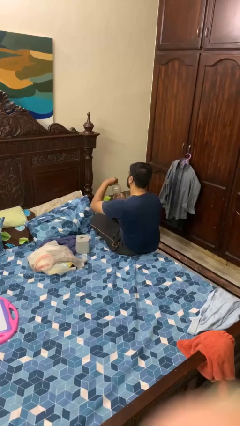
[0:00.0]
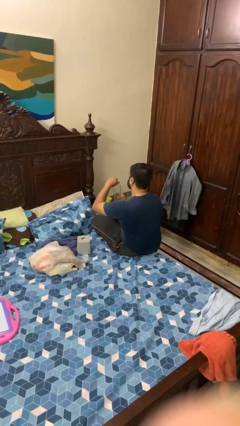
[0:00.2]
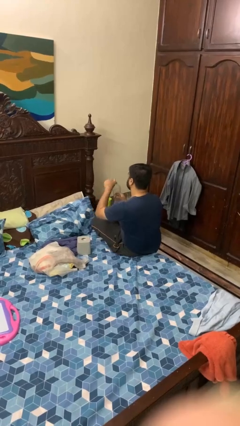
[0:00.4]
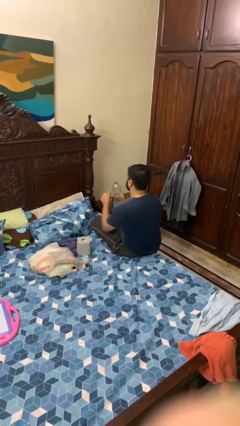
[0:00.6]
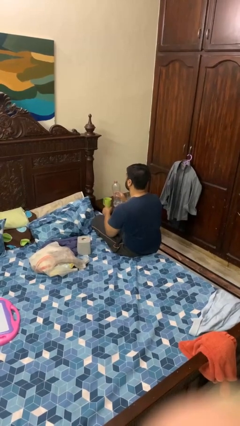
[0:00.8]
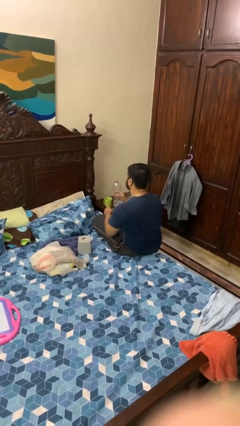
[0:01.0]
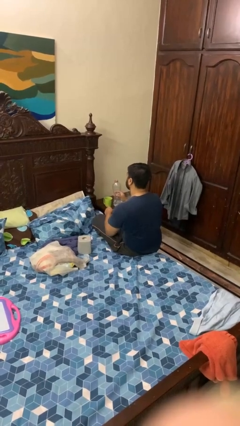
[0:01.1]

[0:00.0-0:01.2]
person unscrews lid from bottle

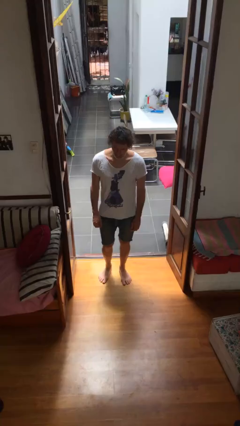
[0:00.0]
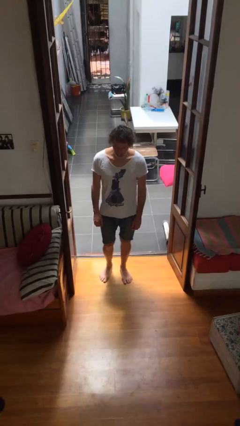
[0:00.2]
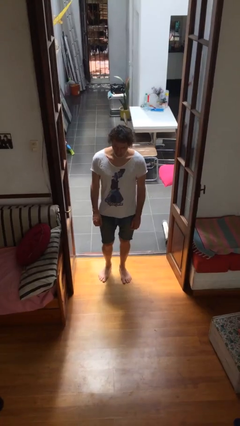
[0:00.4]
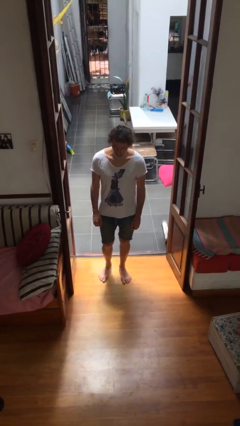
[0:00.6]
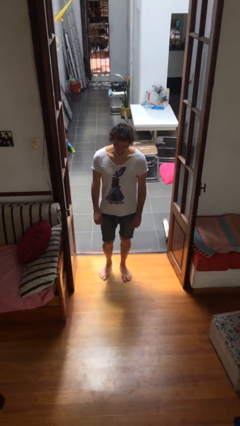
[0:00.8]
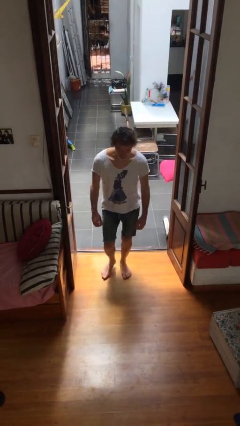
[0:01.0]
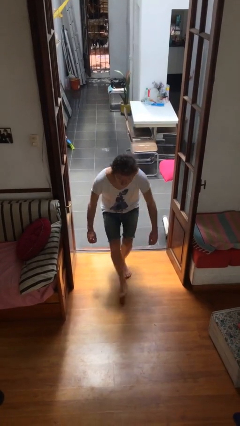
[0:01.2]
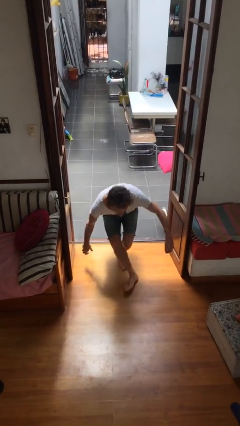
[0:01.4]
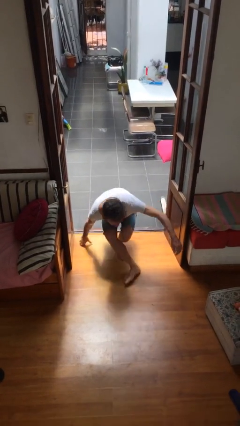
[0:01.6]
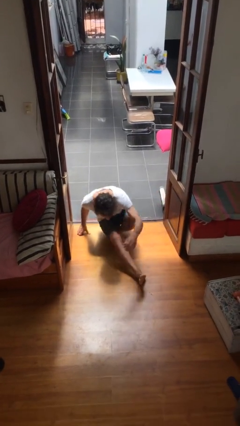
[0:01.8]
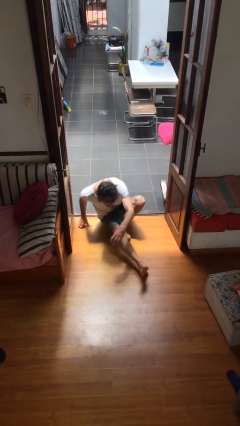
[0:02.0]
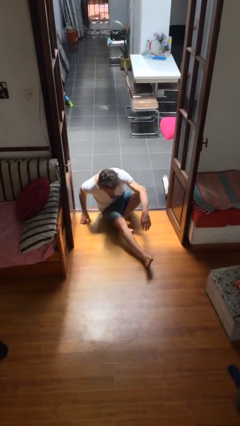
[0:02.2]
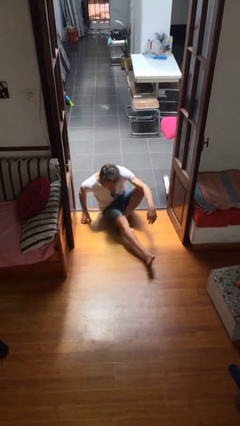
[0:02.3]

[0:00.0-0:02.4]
person sits down

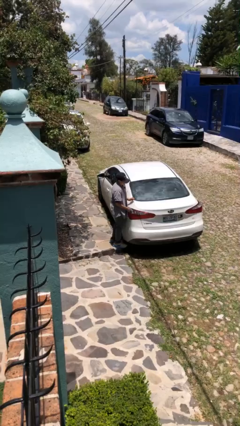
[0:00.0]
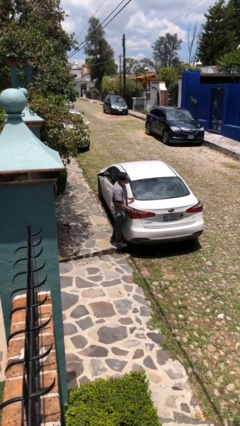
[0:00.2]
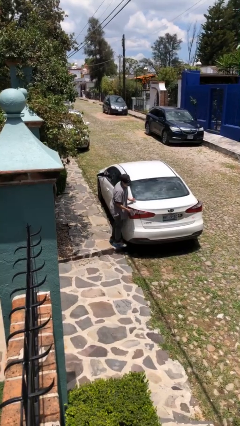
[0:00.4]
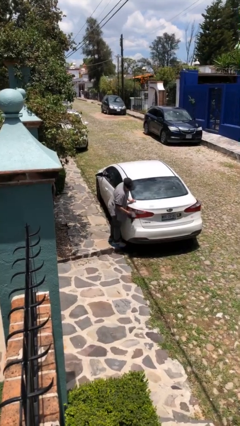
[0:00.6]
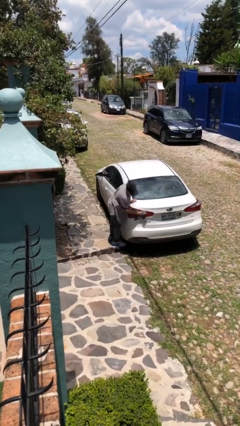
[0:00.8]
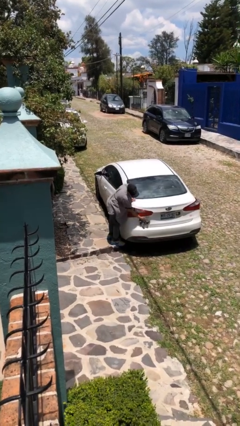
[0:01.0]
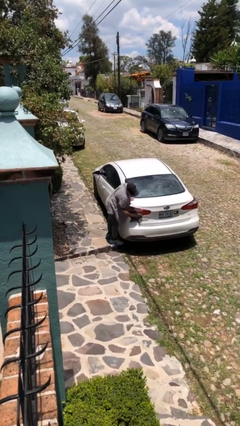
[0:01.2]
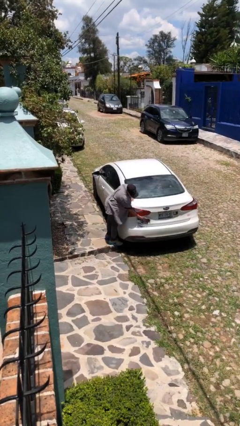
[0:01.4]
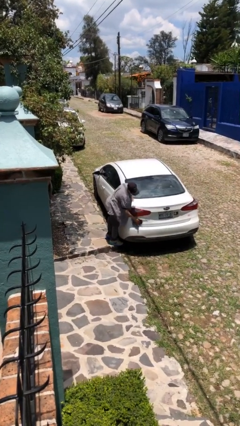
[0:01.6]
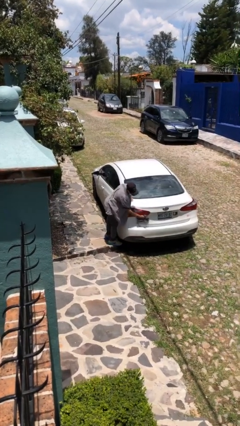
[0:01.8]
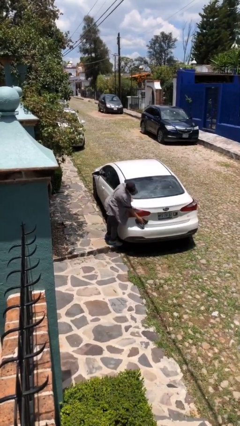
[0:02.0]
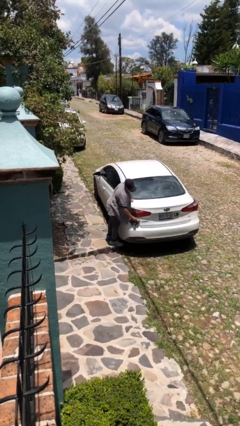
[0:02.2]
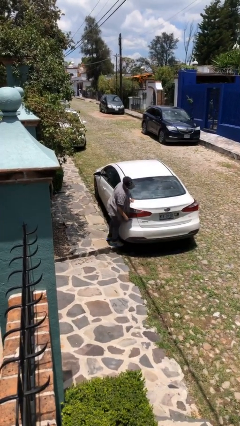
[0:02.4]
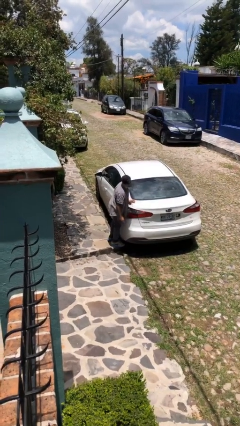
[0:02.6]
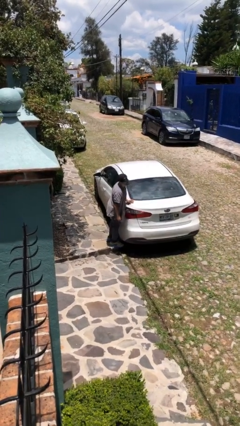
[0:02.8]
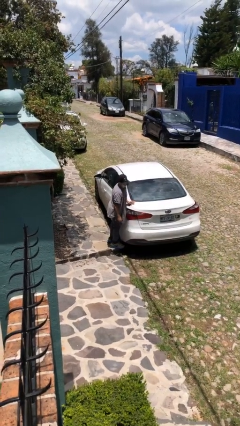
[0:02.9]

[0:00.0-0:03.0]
person polishes car with rag

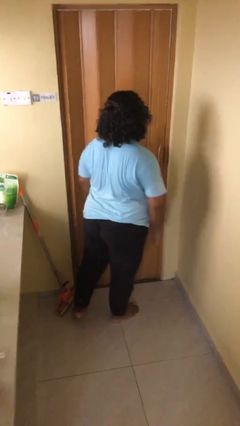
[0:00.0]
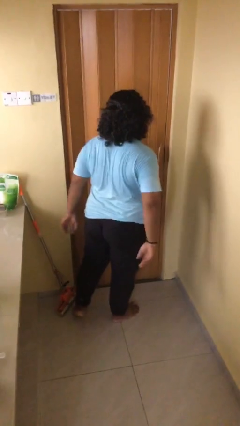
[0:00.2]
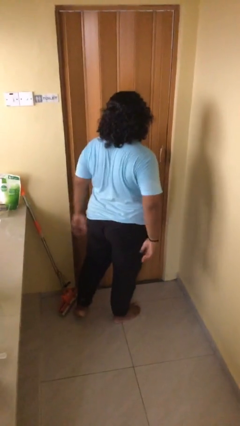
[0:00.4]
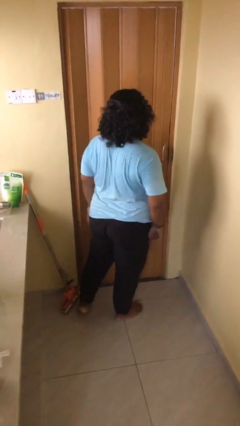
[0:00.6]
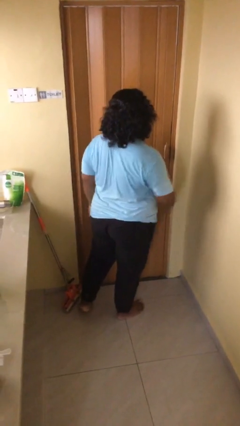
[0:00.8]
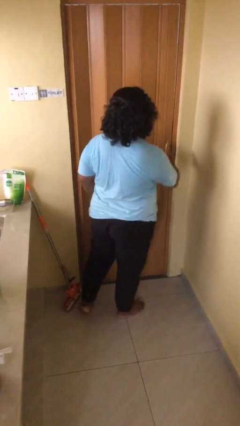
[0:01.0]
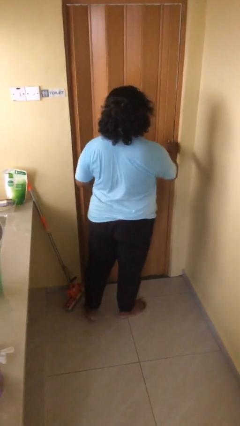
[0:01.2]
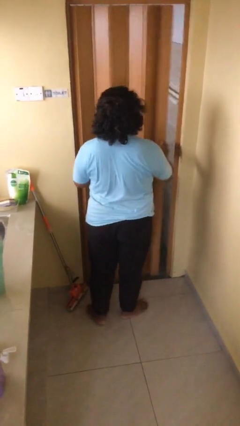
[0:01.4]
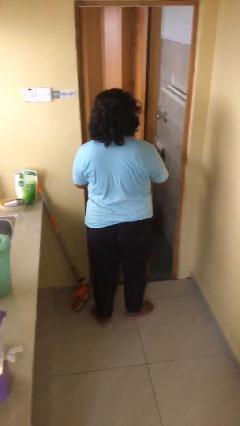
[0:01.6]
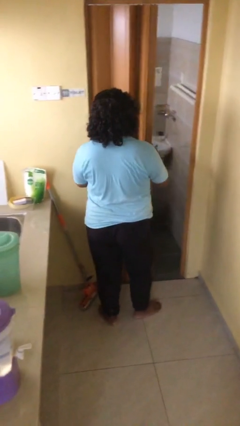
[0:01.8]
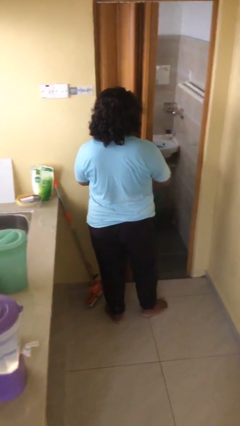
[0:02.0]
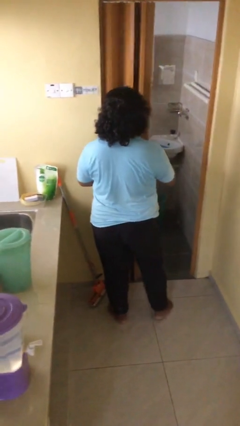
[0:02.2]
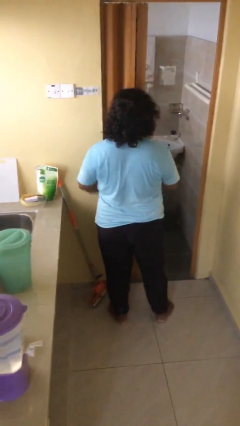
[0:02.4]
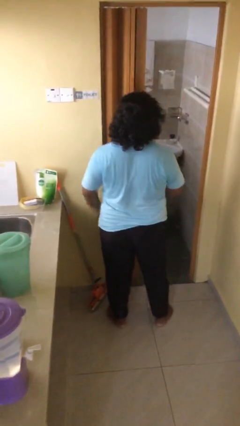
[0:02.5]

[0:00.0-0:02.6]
person opens sliding door

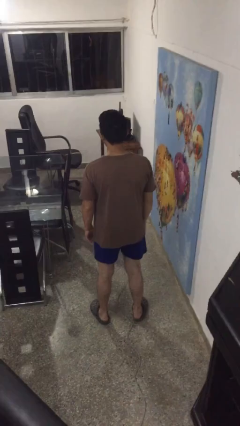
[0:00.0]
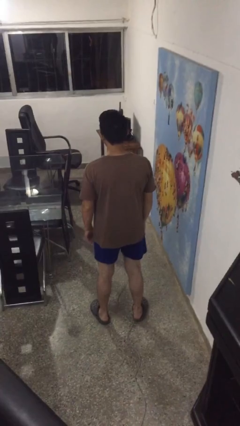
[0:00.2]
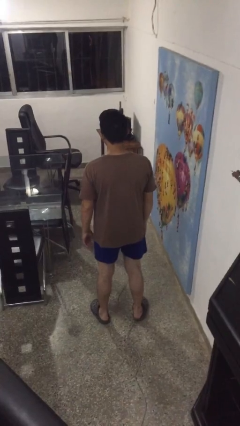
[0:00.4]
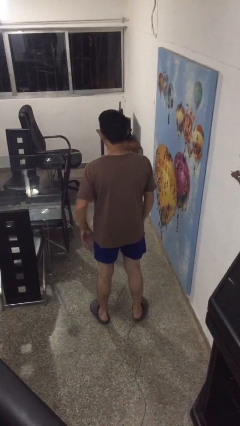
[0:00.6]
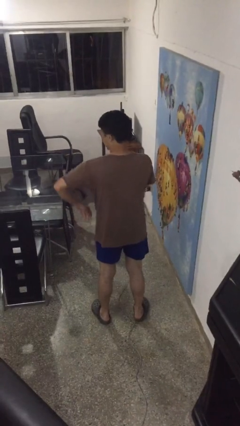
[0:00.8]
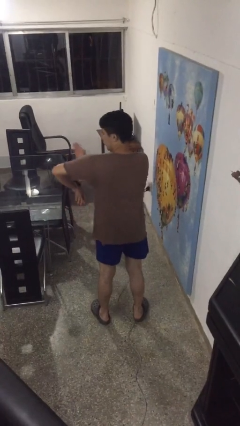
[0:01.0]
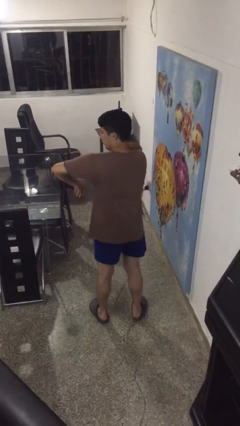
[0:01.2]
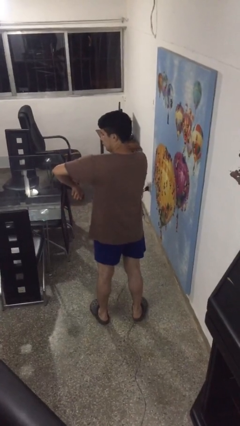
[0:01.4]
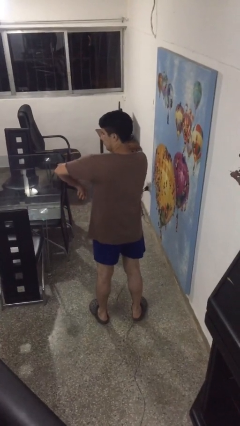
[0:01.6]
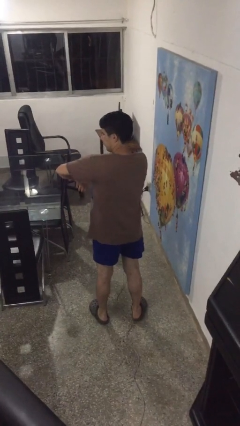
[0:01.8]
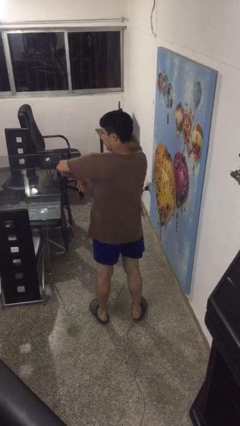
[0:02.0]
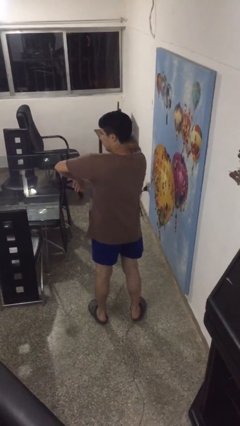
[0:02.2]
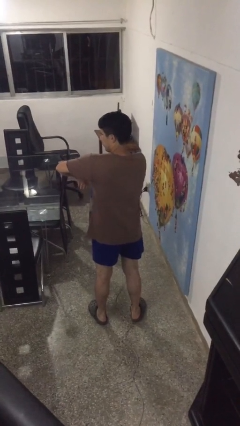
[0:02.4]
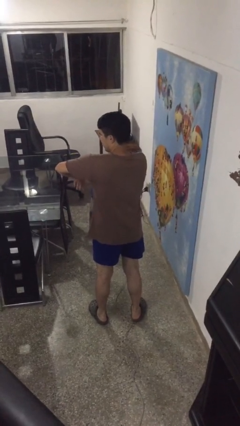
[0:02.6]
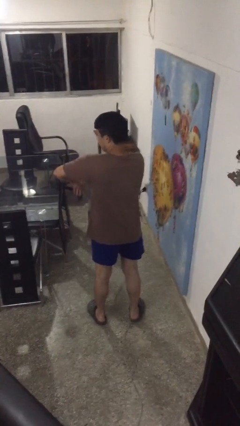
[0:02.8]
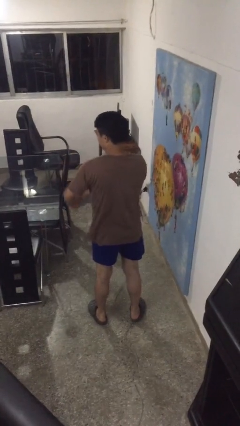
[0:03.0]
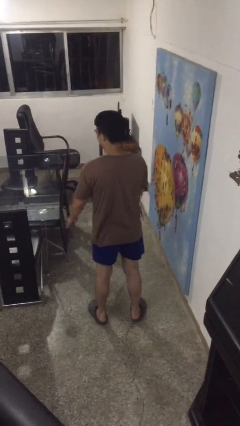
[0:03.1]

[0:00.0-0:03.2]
person swats bug

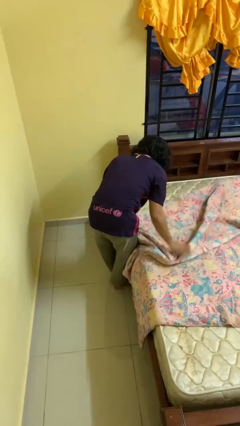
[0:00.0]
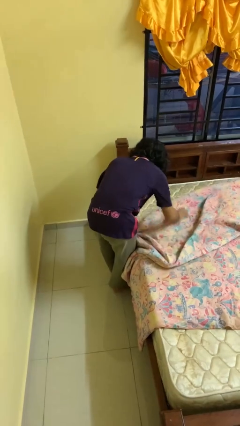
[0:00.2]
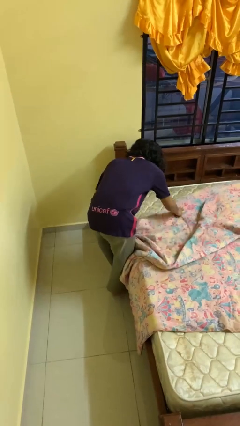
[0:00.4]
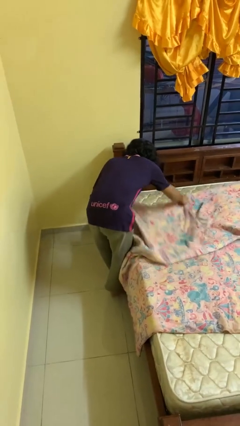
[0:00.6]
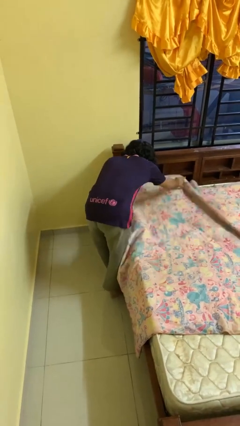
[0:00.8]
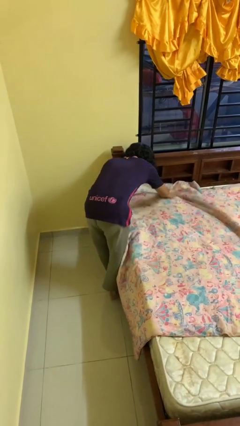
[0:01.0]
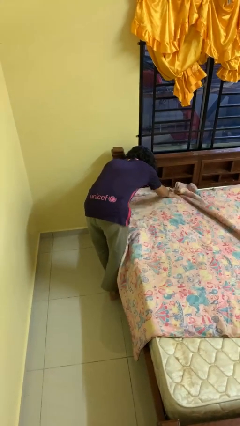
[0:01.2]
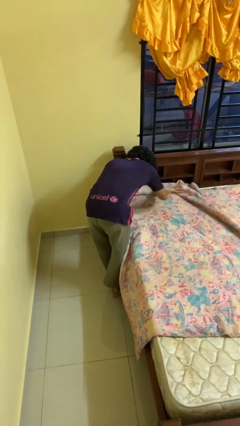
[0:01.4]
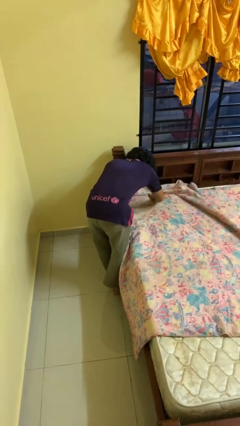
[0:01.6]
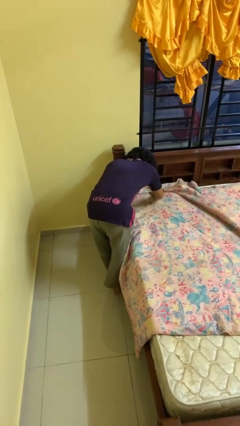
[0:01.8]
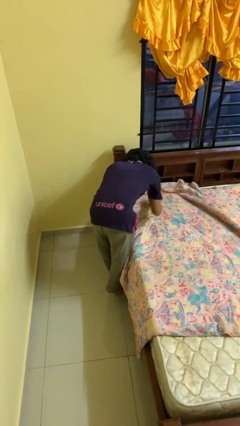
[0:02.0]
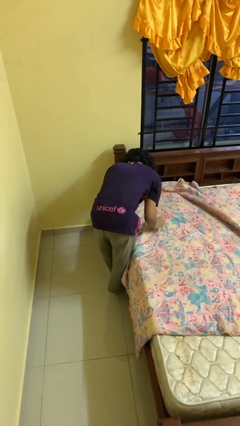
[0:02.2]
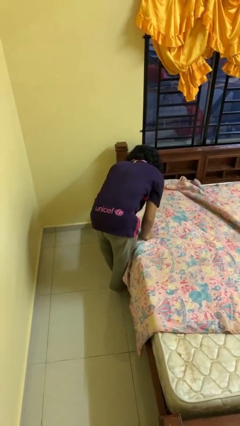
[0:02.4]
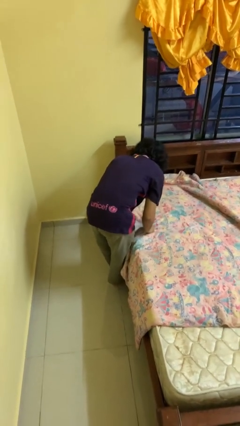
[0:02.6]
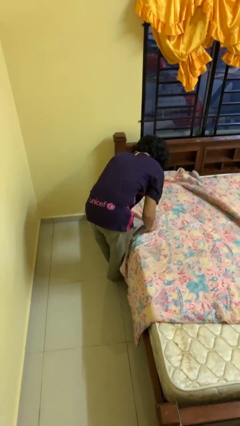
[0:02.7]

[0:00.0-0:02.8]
person makes bed

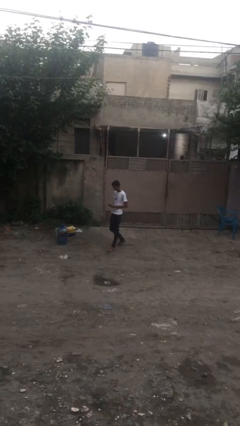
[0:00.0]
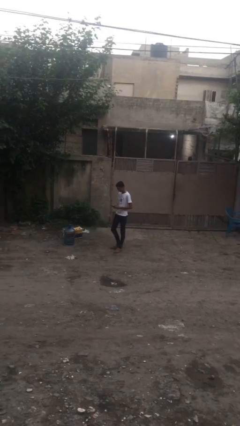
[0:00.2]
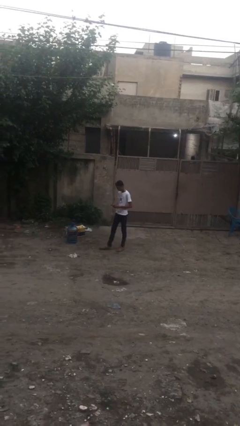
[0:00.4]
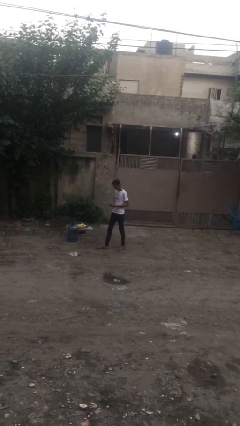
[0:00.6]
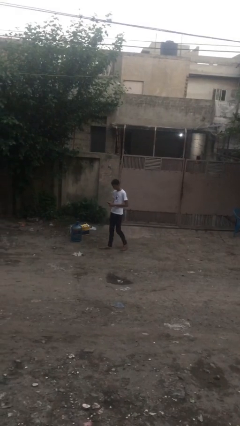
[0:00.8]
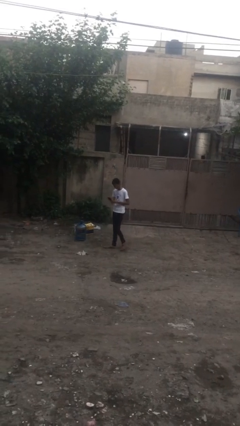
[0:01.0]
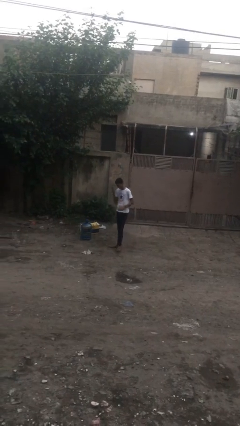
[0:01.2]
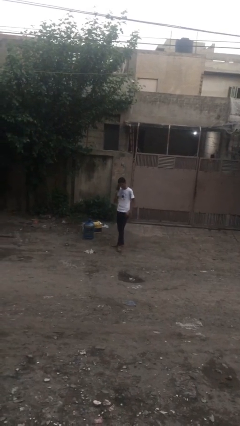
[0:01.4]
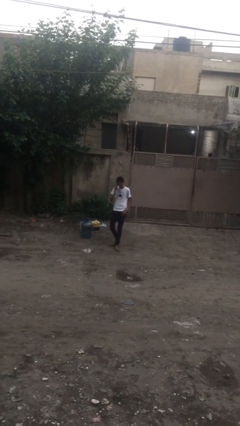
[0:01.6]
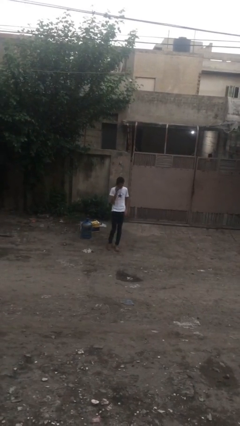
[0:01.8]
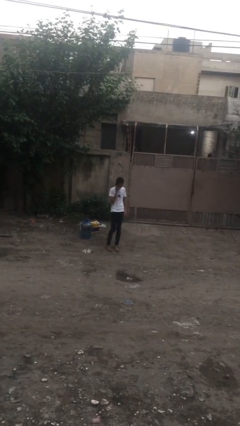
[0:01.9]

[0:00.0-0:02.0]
person talks on phone
